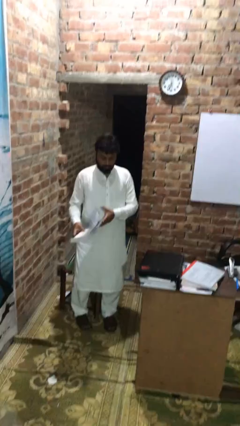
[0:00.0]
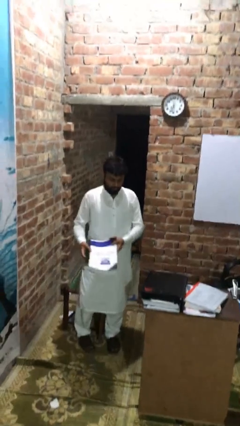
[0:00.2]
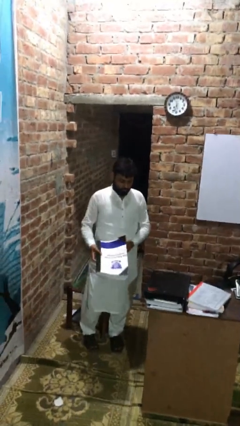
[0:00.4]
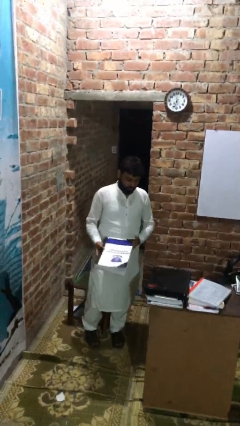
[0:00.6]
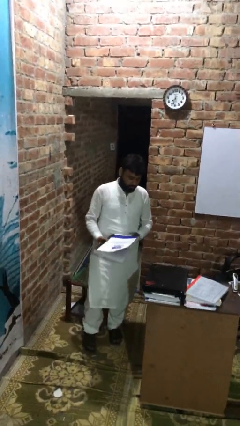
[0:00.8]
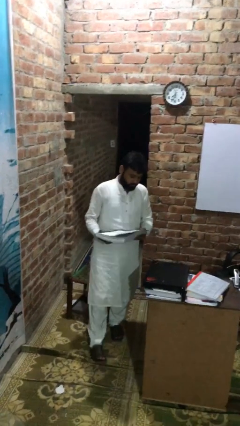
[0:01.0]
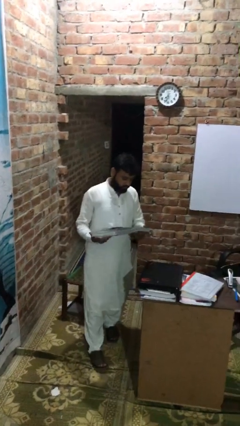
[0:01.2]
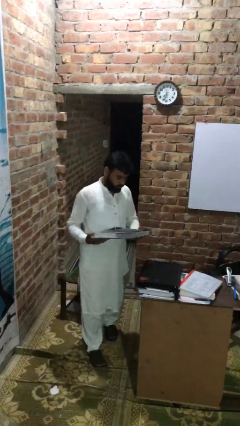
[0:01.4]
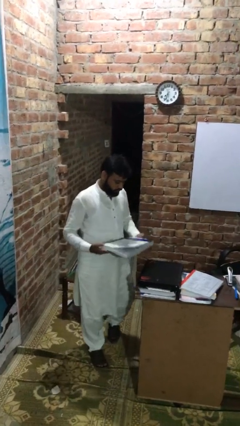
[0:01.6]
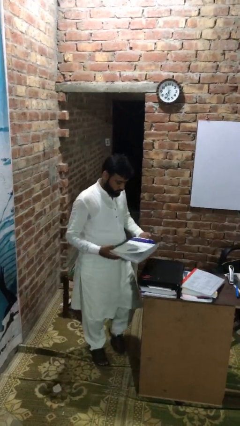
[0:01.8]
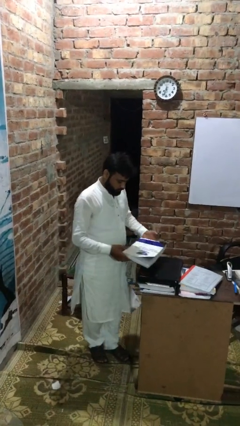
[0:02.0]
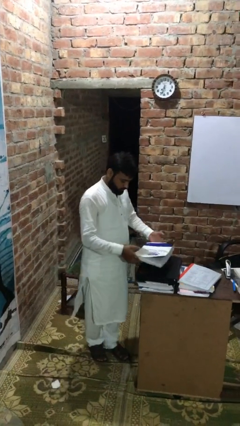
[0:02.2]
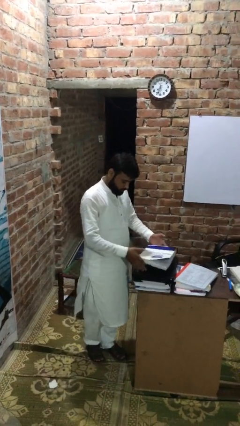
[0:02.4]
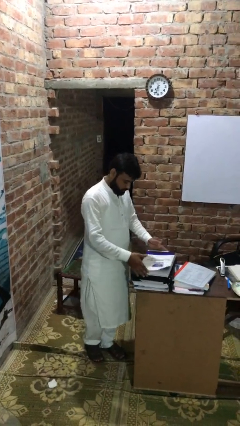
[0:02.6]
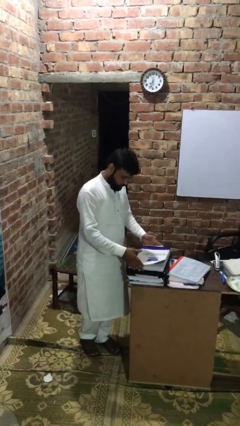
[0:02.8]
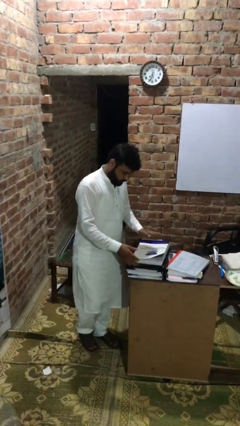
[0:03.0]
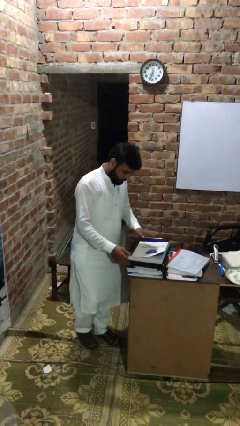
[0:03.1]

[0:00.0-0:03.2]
person puts down object on table

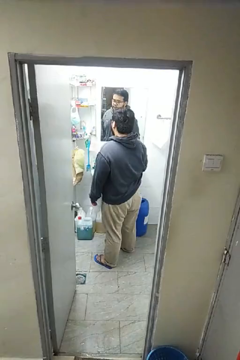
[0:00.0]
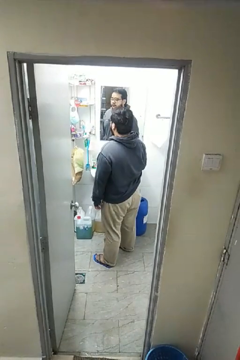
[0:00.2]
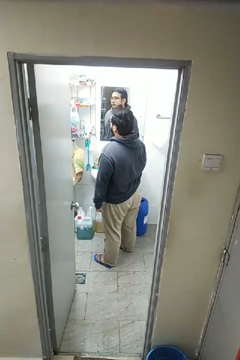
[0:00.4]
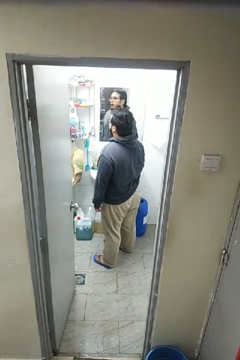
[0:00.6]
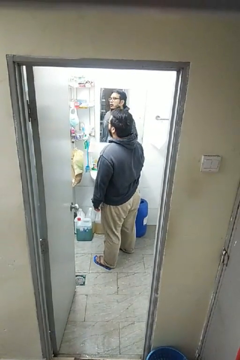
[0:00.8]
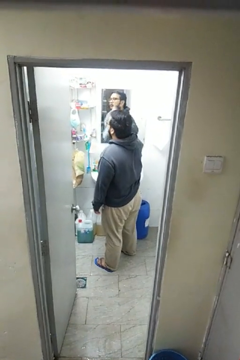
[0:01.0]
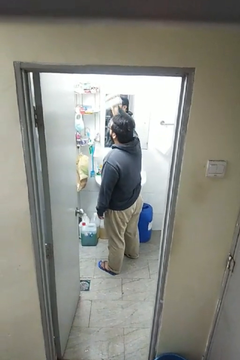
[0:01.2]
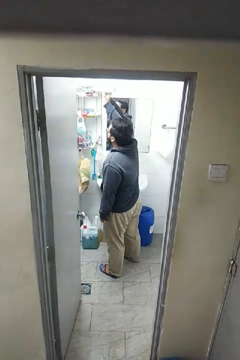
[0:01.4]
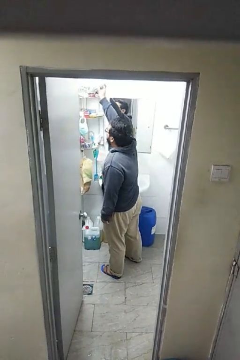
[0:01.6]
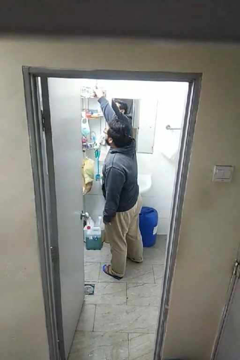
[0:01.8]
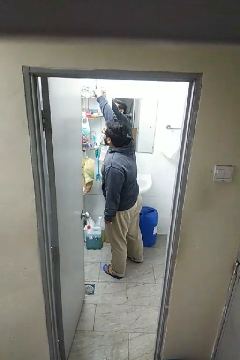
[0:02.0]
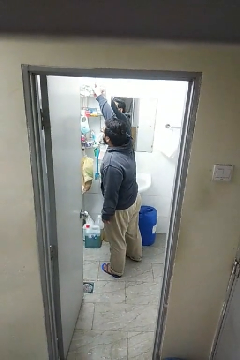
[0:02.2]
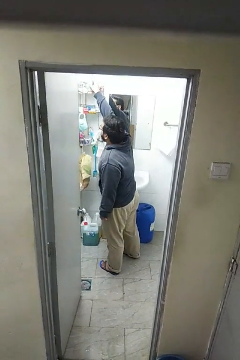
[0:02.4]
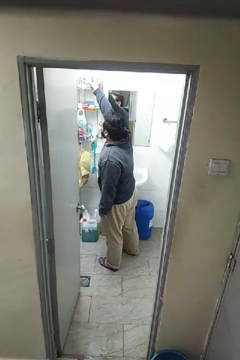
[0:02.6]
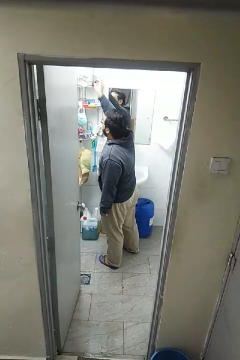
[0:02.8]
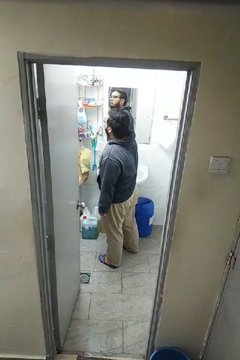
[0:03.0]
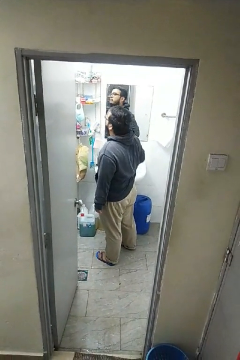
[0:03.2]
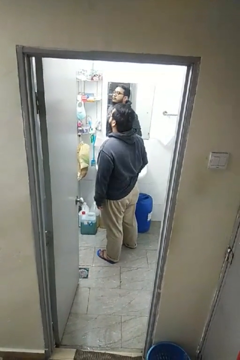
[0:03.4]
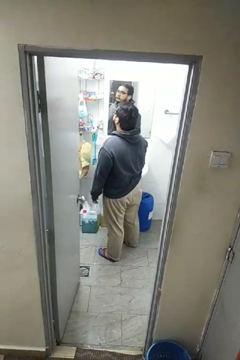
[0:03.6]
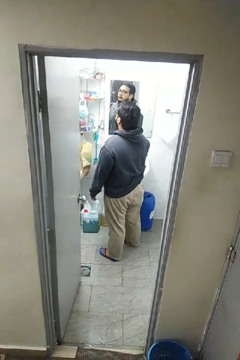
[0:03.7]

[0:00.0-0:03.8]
person puts down object on countertop

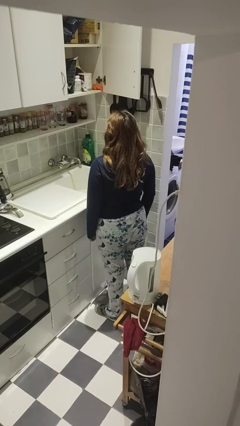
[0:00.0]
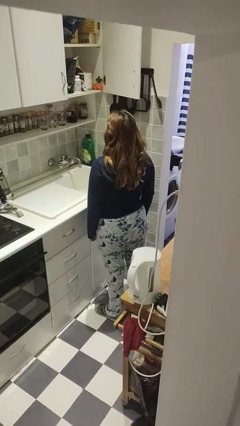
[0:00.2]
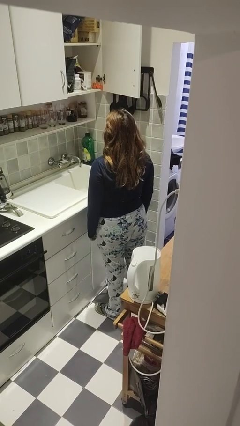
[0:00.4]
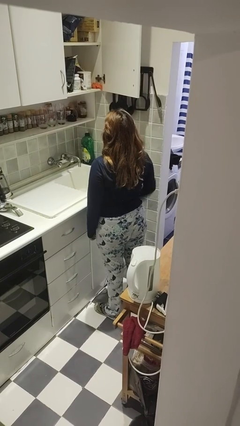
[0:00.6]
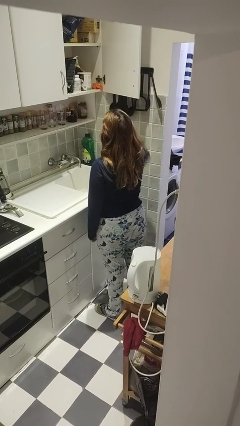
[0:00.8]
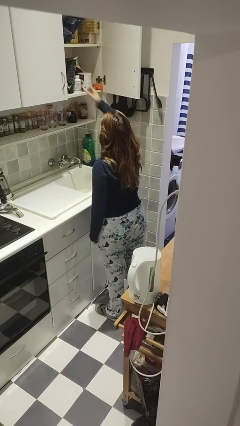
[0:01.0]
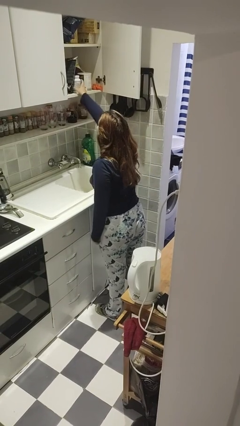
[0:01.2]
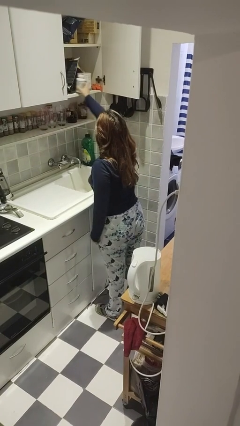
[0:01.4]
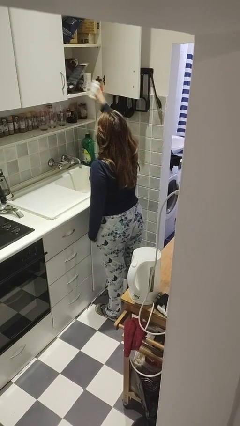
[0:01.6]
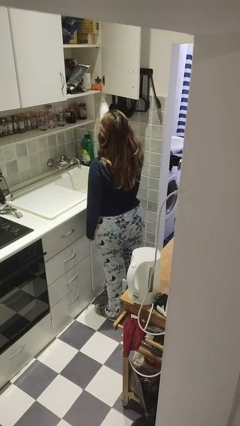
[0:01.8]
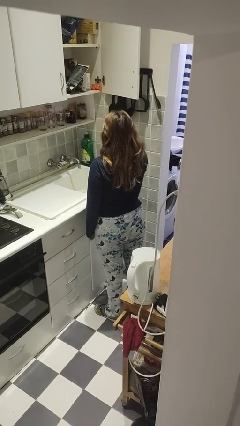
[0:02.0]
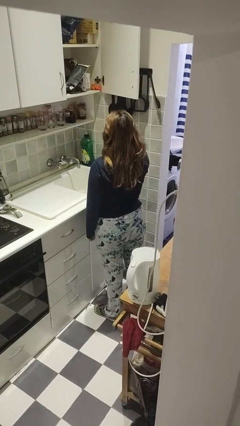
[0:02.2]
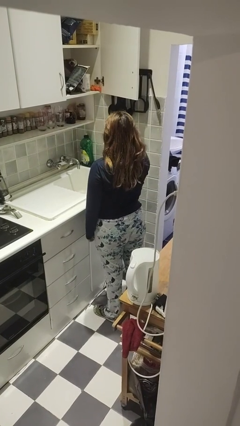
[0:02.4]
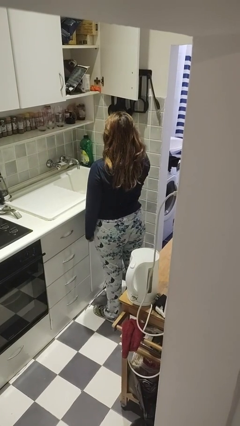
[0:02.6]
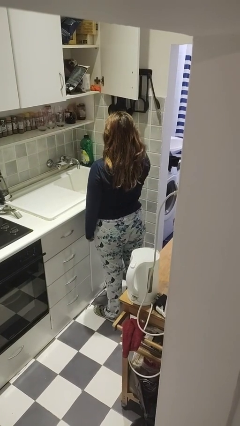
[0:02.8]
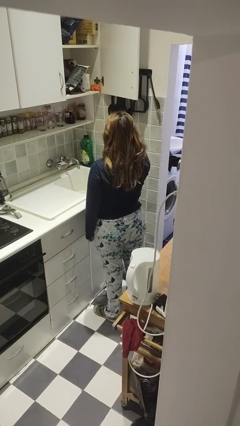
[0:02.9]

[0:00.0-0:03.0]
person takes object from cabinet

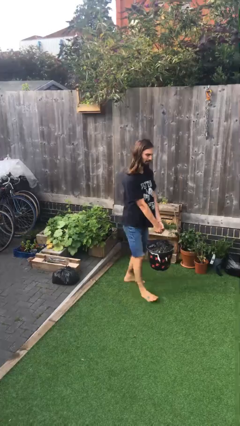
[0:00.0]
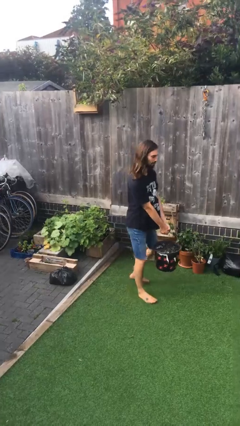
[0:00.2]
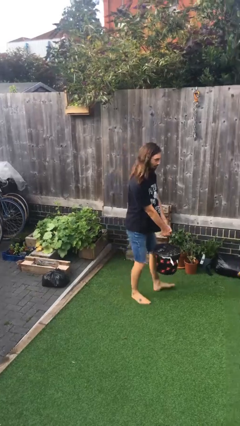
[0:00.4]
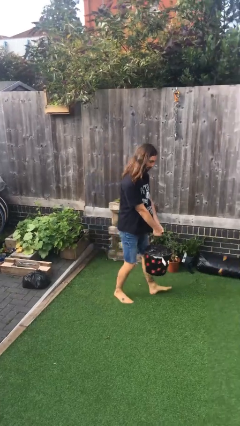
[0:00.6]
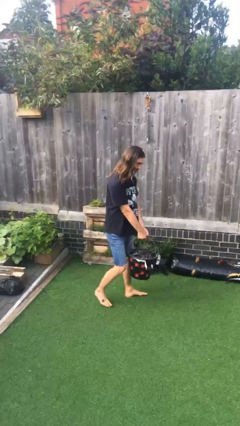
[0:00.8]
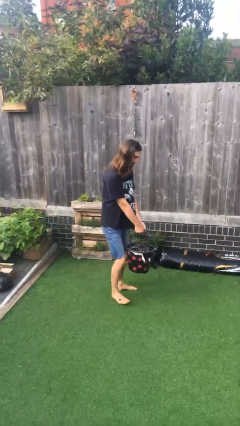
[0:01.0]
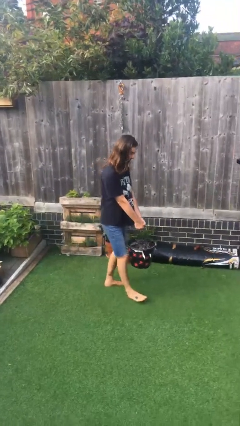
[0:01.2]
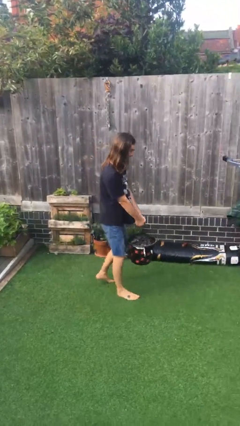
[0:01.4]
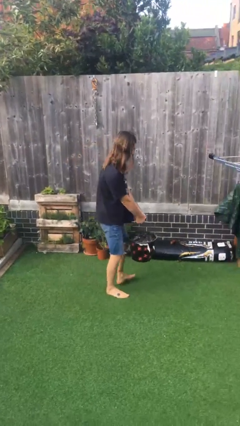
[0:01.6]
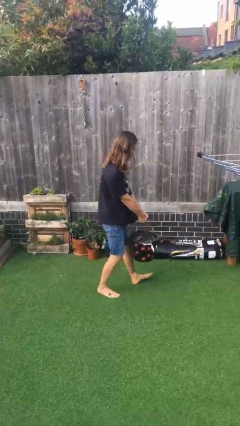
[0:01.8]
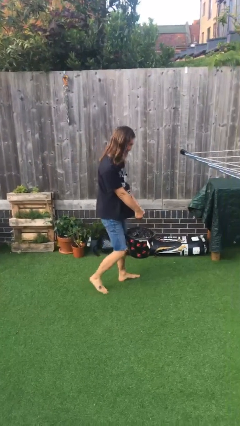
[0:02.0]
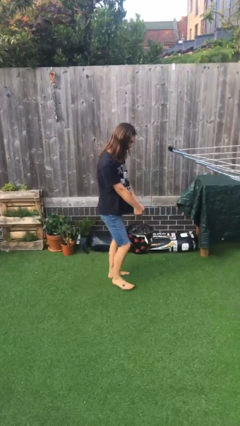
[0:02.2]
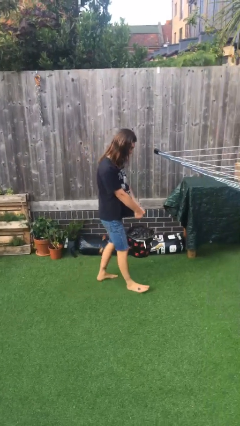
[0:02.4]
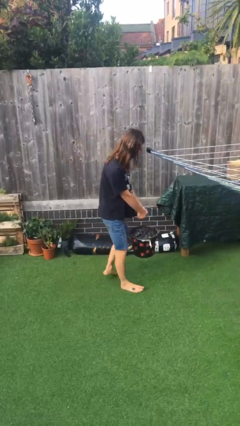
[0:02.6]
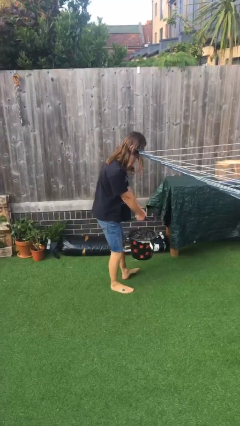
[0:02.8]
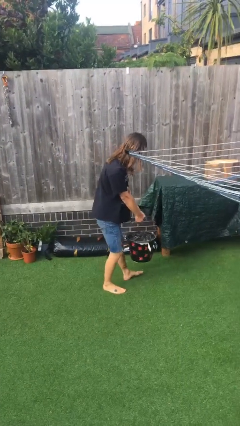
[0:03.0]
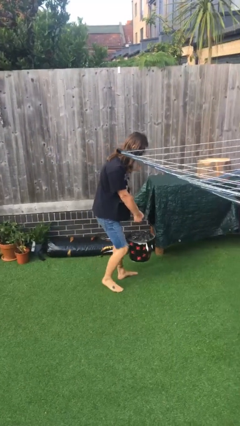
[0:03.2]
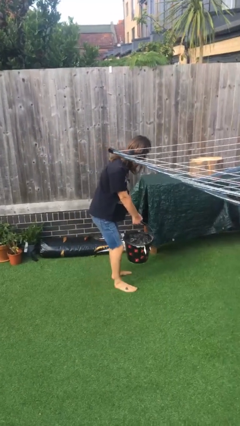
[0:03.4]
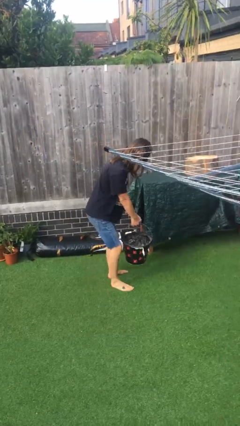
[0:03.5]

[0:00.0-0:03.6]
person carries heavy object

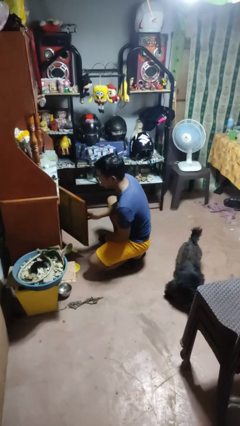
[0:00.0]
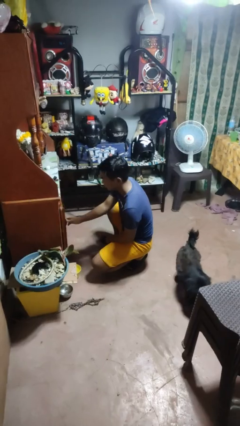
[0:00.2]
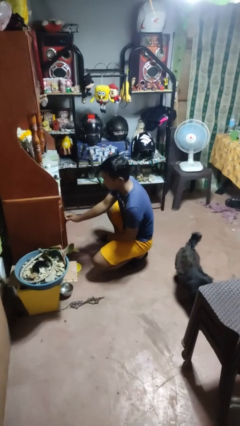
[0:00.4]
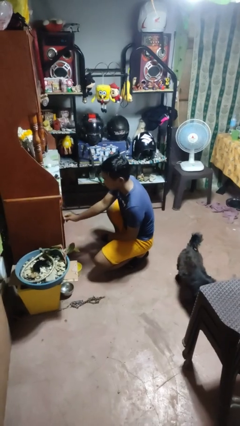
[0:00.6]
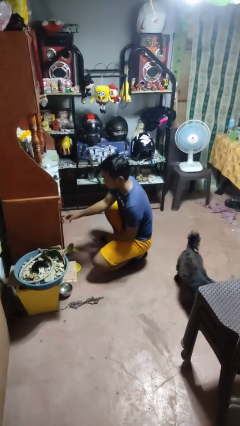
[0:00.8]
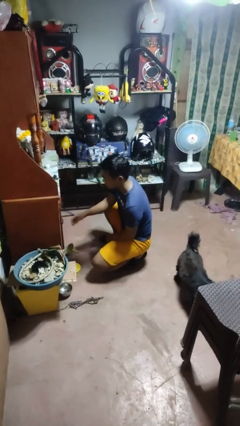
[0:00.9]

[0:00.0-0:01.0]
person closes cabinet

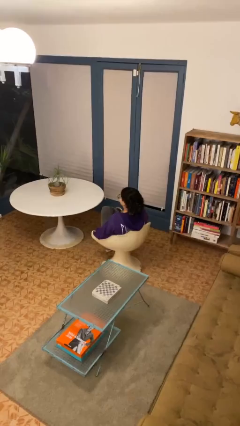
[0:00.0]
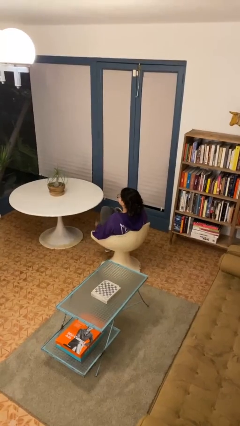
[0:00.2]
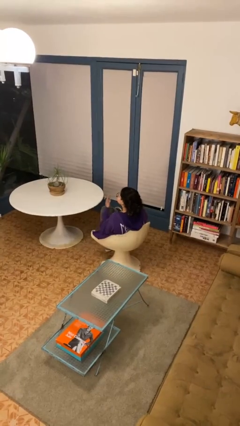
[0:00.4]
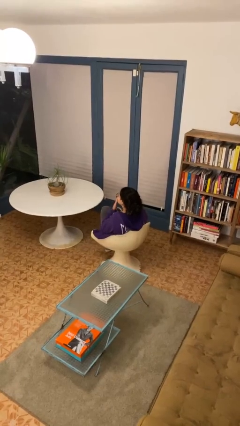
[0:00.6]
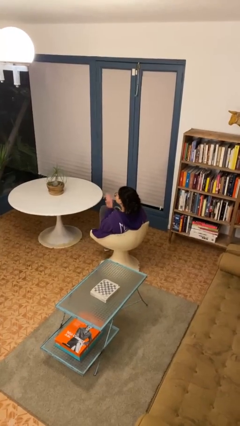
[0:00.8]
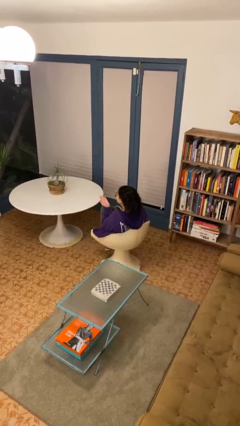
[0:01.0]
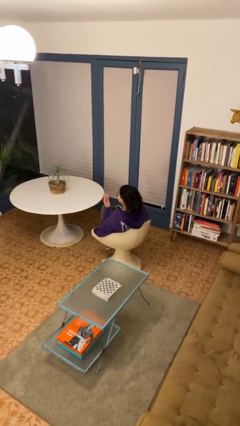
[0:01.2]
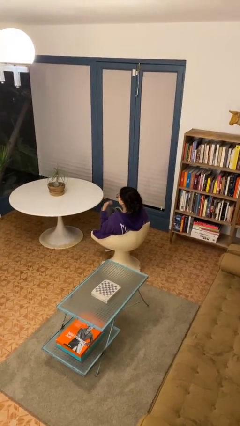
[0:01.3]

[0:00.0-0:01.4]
person gestures blow kiss

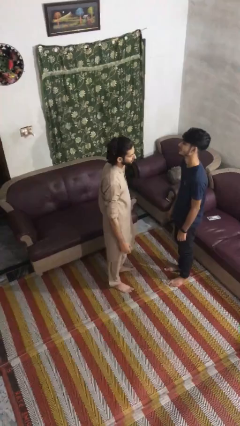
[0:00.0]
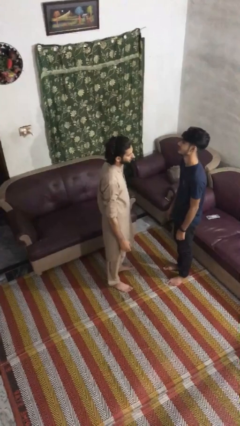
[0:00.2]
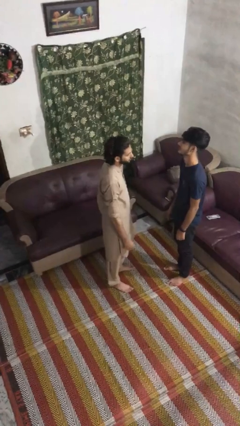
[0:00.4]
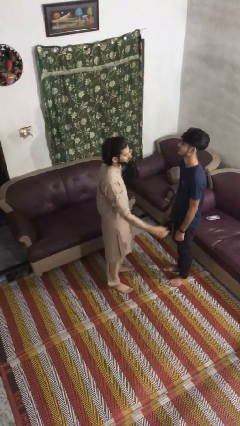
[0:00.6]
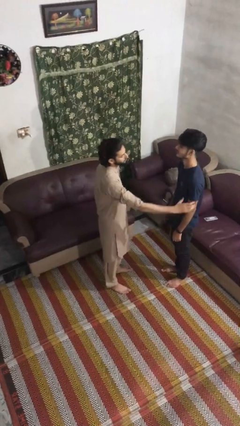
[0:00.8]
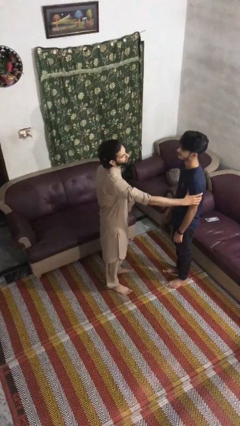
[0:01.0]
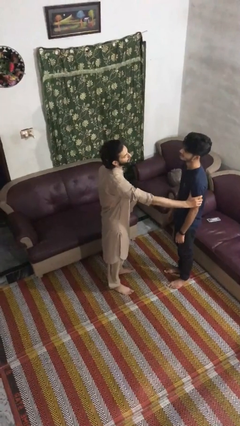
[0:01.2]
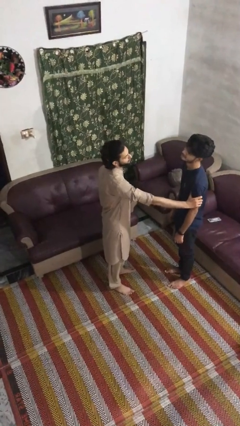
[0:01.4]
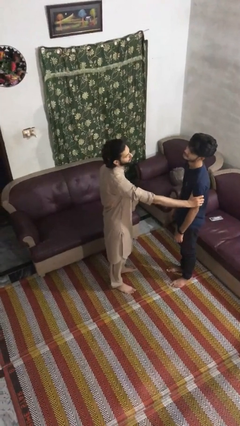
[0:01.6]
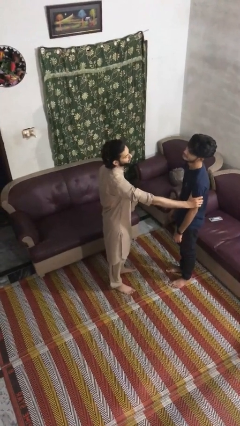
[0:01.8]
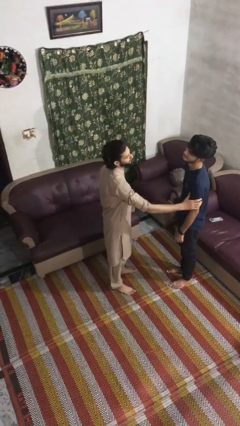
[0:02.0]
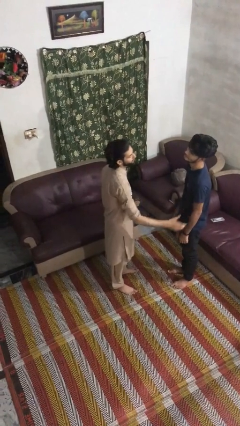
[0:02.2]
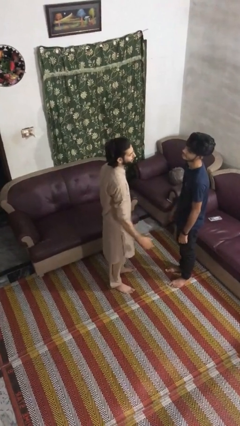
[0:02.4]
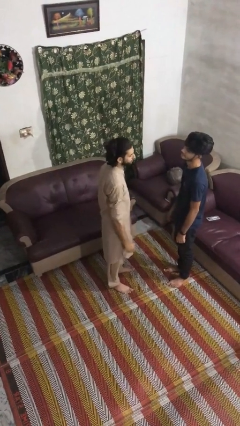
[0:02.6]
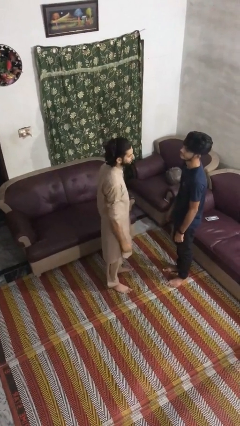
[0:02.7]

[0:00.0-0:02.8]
person grabs person by bicep
